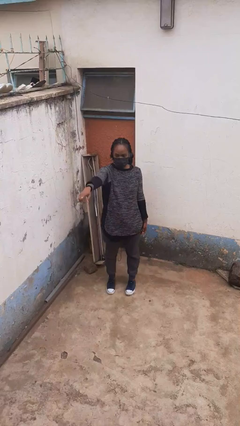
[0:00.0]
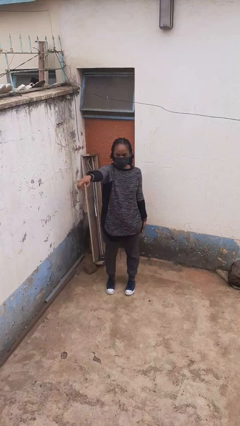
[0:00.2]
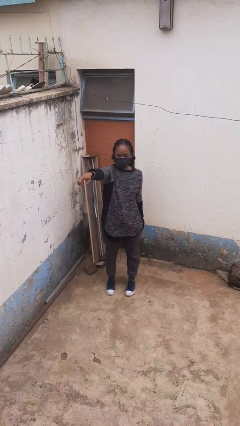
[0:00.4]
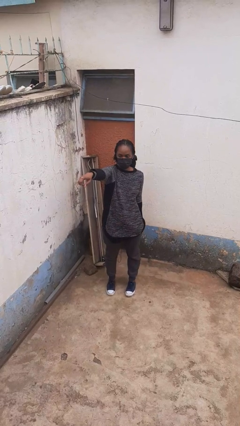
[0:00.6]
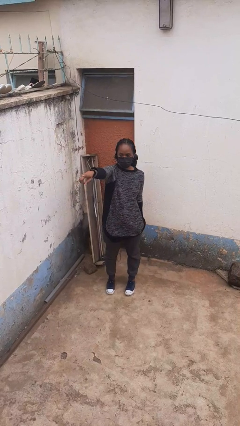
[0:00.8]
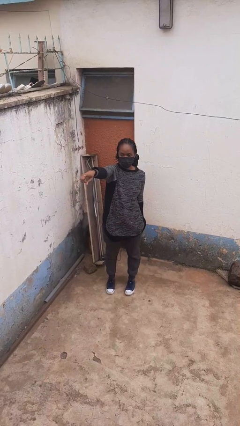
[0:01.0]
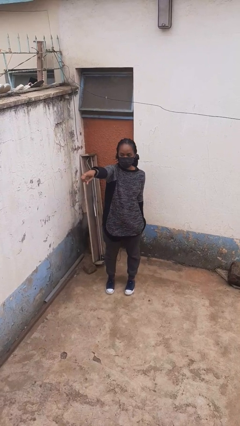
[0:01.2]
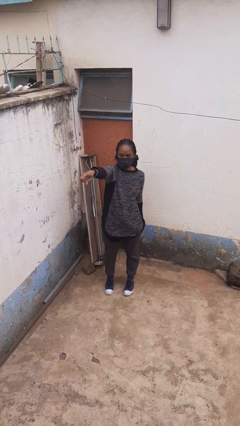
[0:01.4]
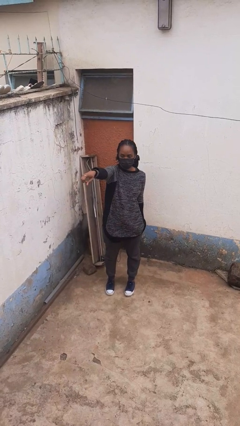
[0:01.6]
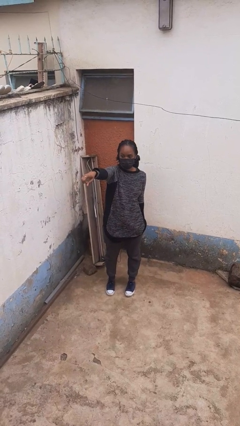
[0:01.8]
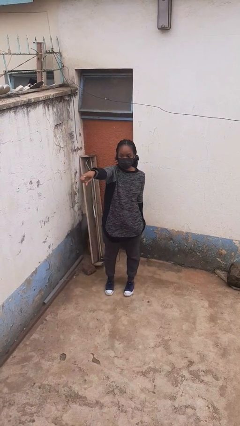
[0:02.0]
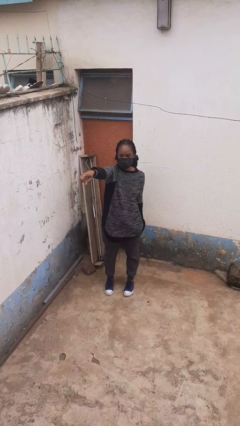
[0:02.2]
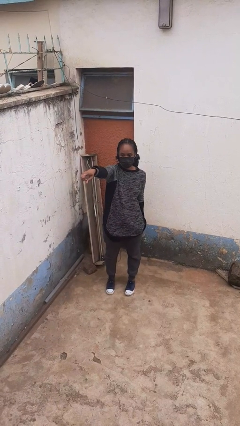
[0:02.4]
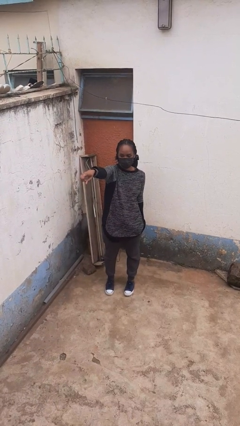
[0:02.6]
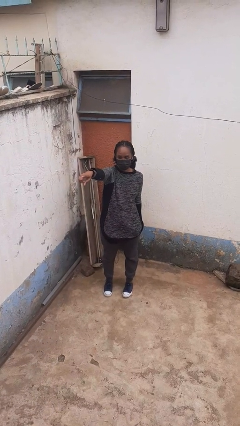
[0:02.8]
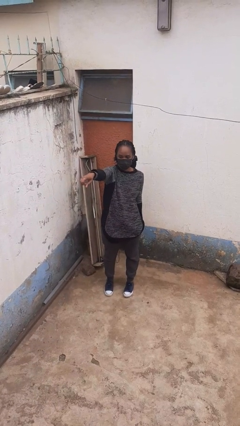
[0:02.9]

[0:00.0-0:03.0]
person points at person

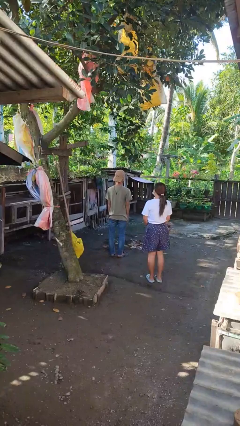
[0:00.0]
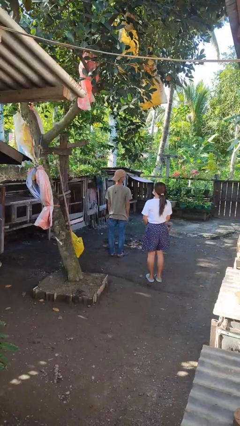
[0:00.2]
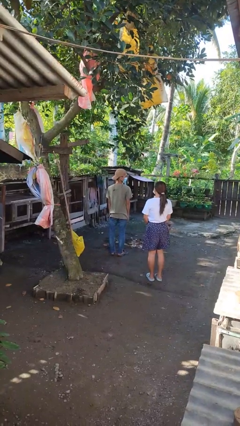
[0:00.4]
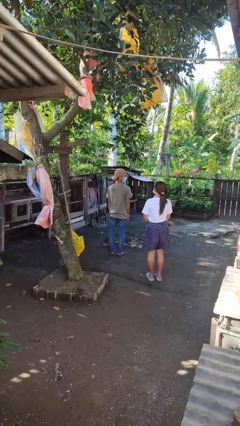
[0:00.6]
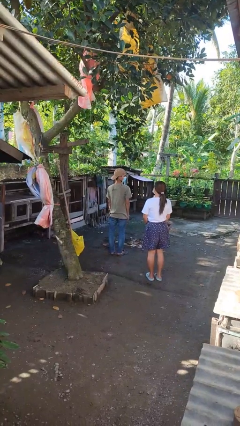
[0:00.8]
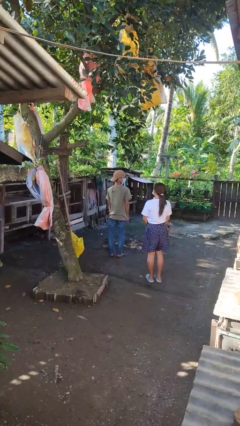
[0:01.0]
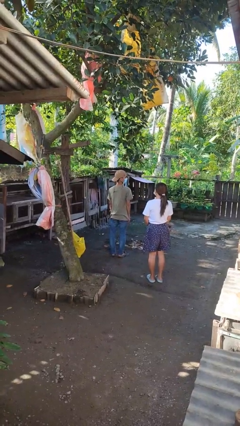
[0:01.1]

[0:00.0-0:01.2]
person looks over shoulder

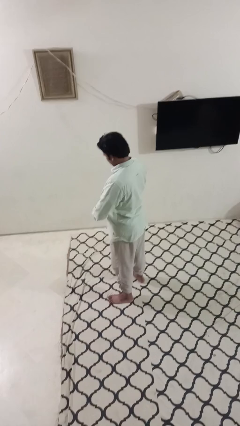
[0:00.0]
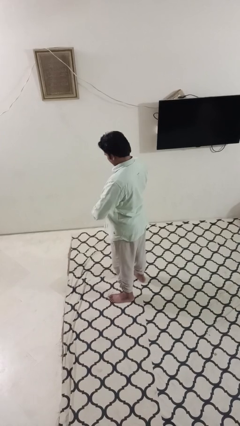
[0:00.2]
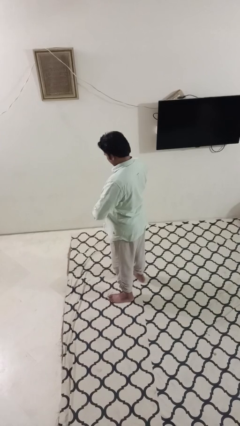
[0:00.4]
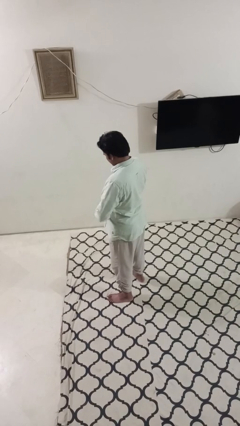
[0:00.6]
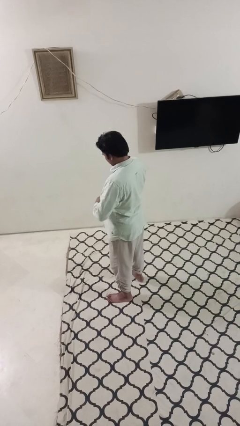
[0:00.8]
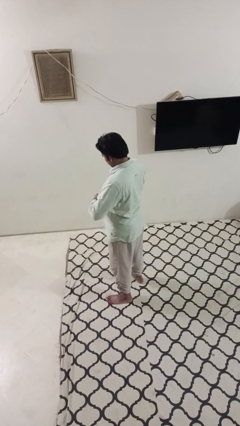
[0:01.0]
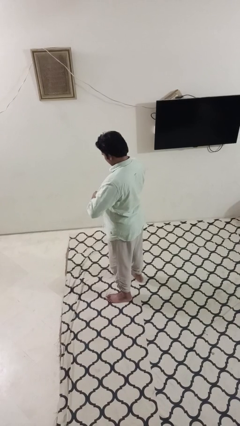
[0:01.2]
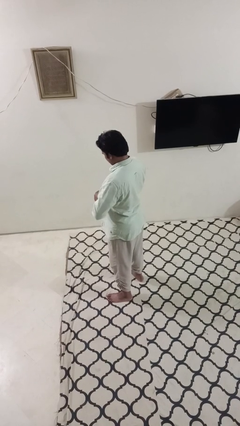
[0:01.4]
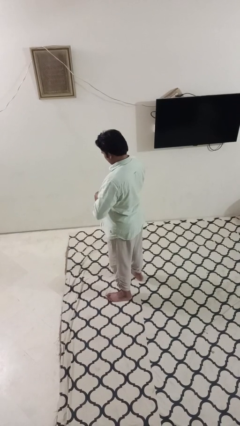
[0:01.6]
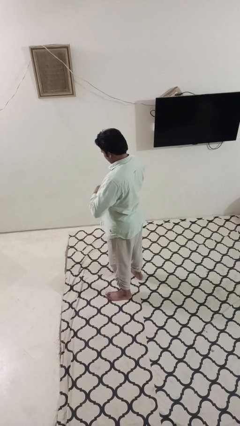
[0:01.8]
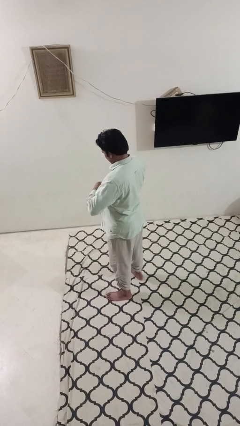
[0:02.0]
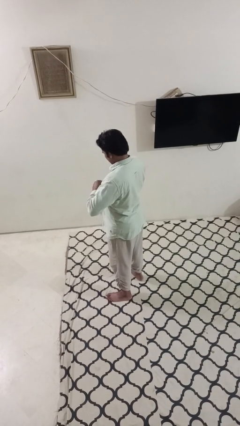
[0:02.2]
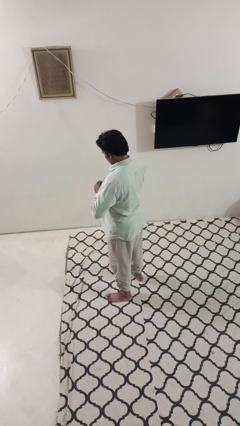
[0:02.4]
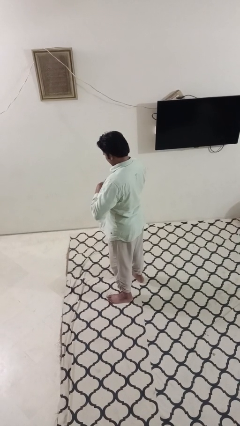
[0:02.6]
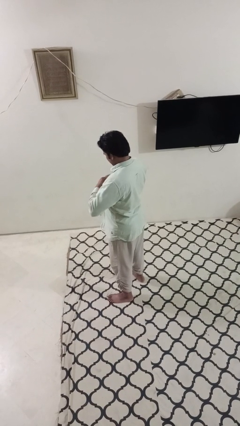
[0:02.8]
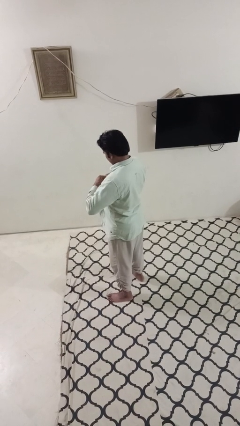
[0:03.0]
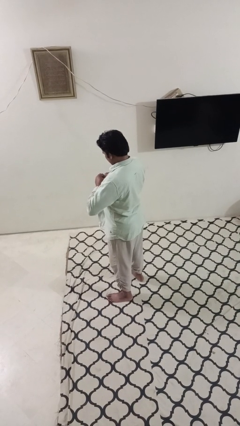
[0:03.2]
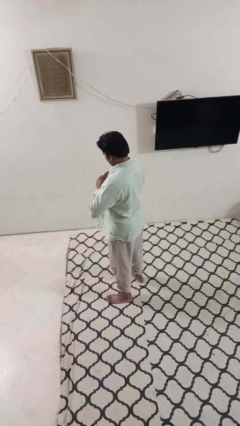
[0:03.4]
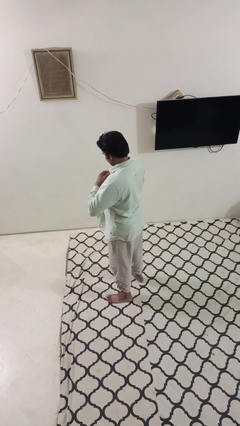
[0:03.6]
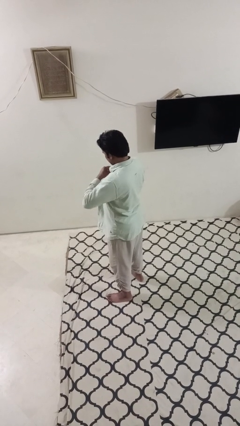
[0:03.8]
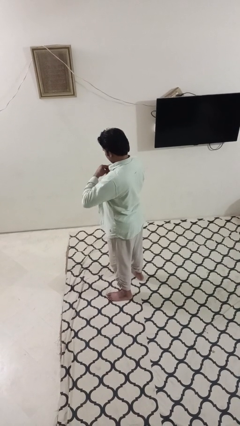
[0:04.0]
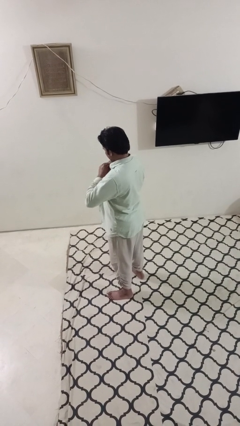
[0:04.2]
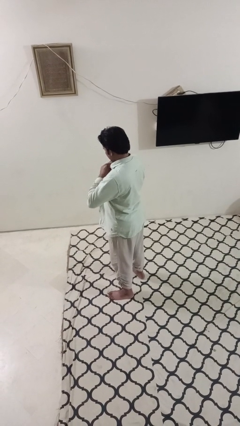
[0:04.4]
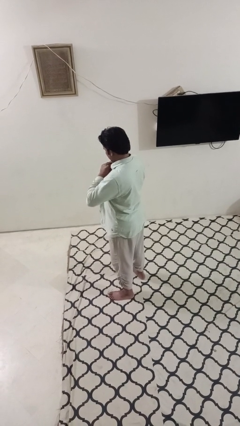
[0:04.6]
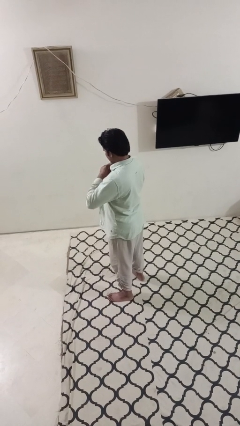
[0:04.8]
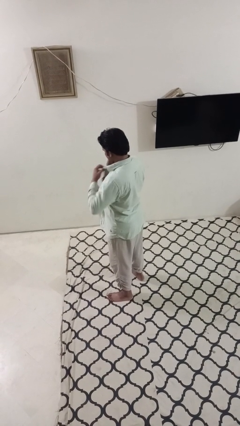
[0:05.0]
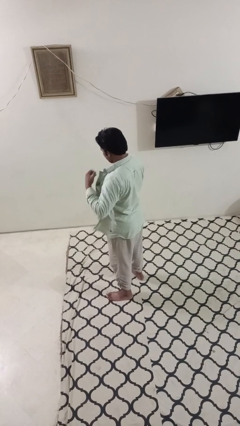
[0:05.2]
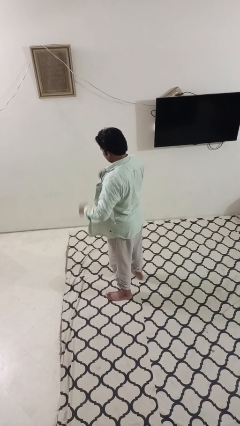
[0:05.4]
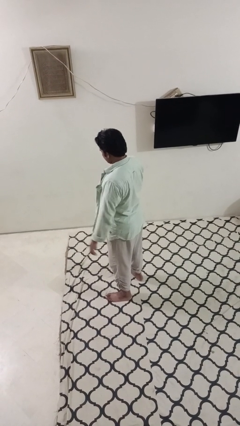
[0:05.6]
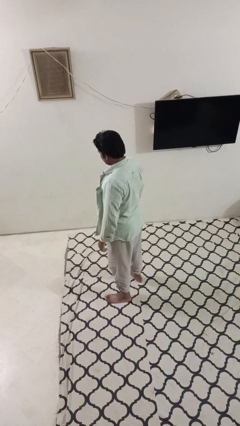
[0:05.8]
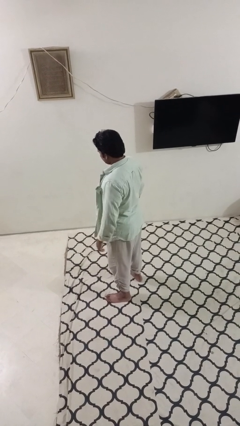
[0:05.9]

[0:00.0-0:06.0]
person unbuttons shirt

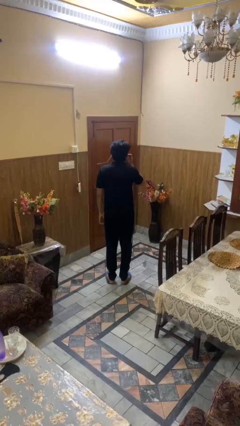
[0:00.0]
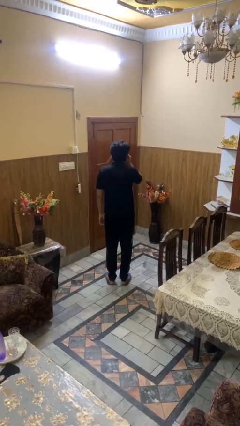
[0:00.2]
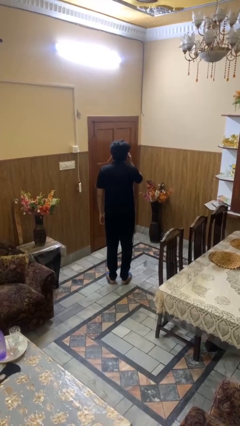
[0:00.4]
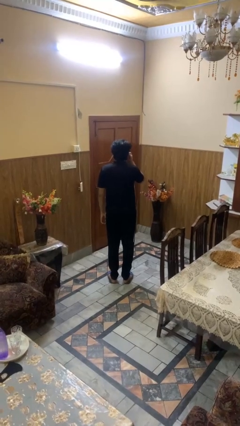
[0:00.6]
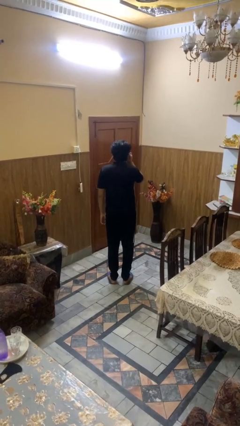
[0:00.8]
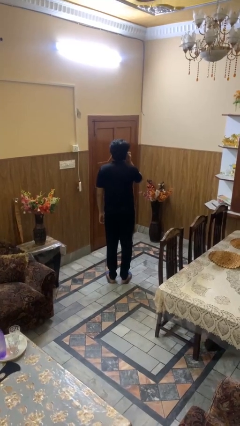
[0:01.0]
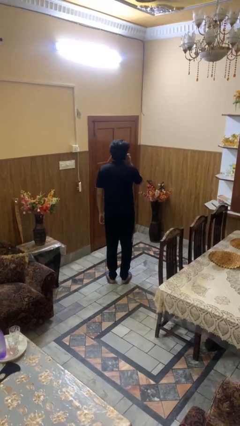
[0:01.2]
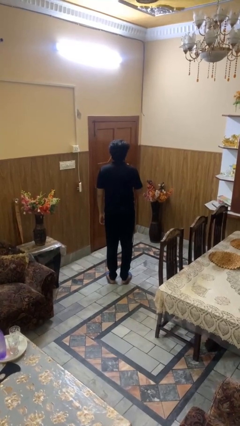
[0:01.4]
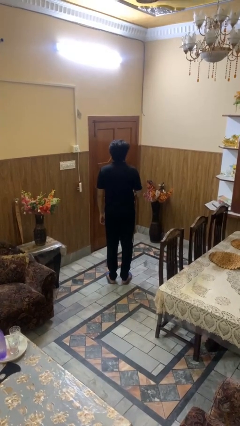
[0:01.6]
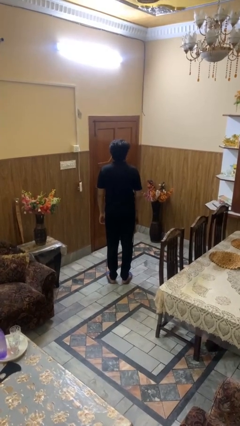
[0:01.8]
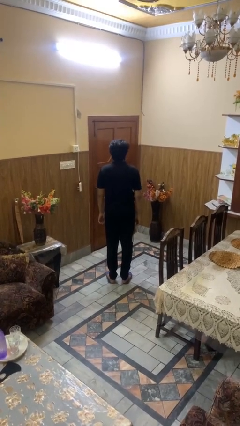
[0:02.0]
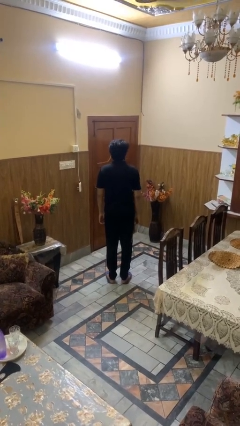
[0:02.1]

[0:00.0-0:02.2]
person touches earlobe

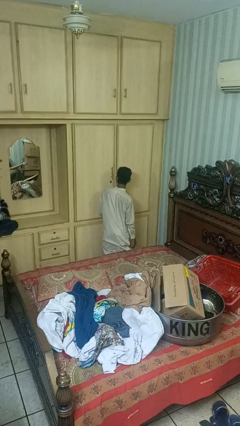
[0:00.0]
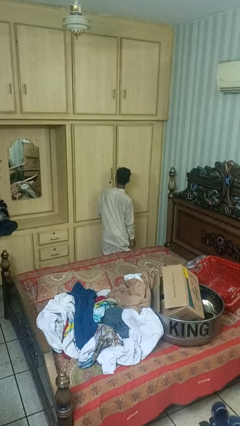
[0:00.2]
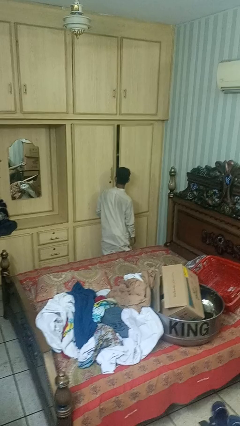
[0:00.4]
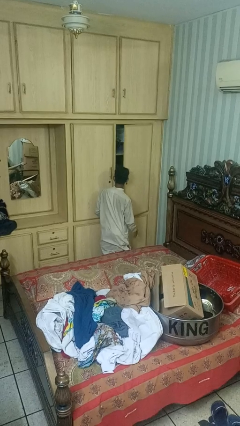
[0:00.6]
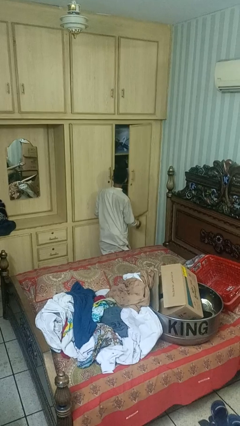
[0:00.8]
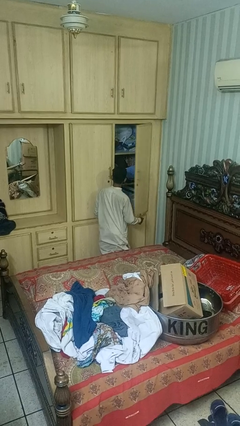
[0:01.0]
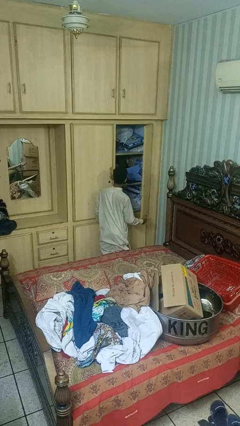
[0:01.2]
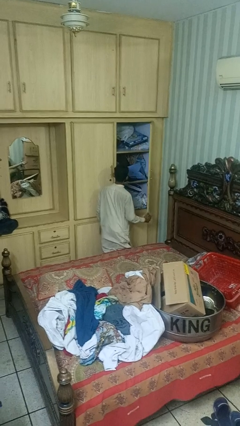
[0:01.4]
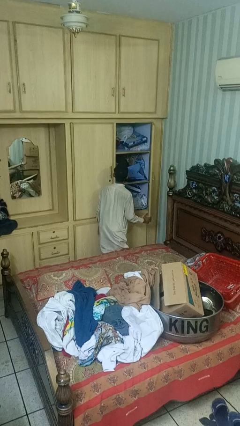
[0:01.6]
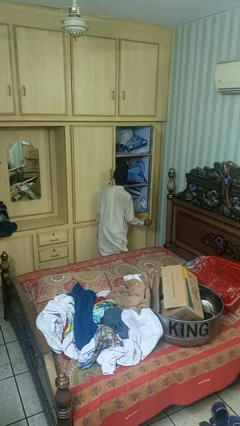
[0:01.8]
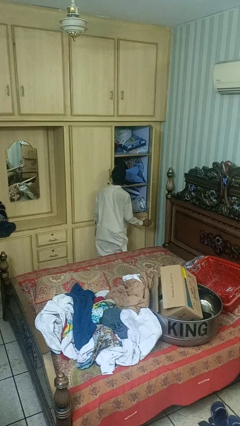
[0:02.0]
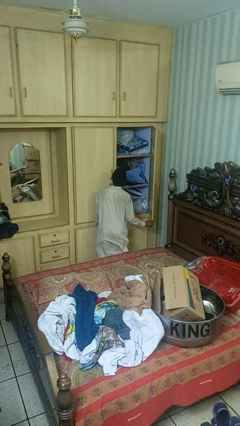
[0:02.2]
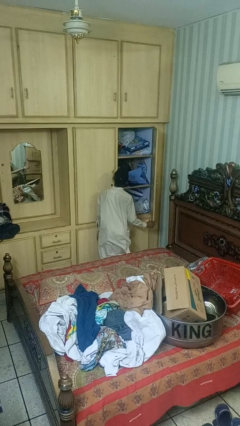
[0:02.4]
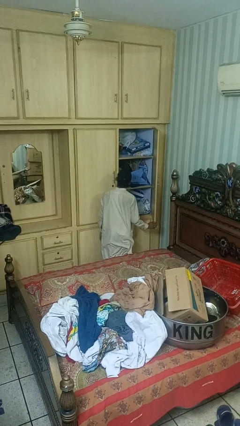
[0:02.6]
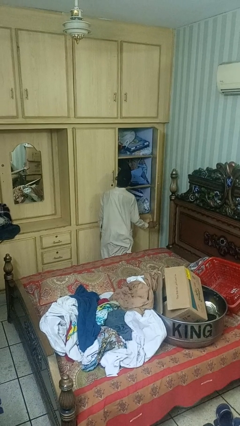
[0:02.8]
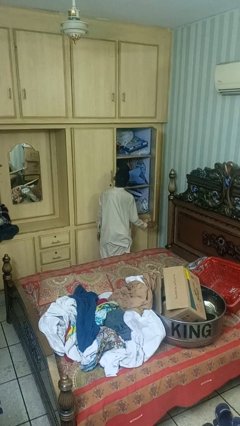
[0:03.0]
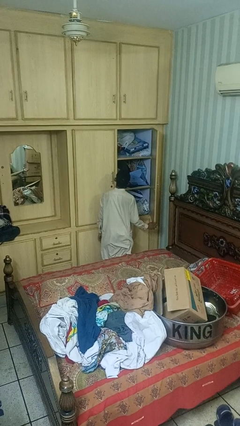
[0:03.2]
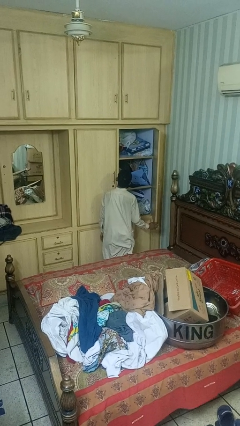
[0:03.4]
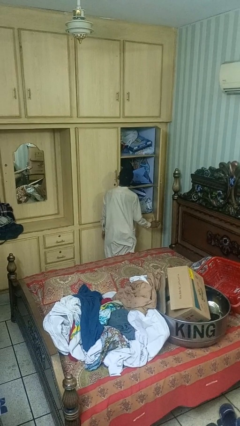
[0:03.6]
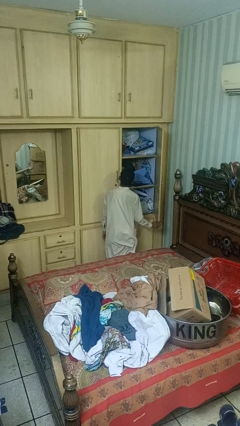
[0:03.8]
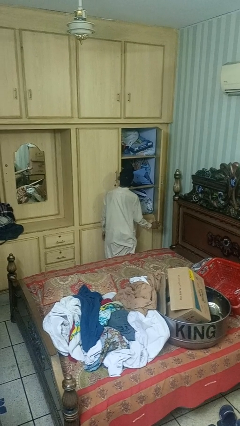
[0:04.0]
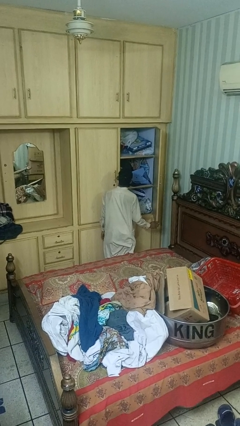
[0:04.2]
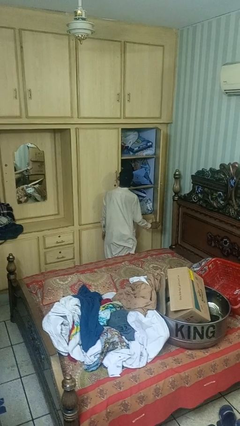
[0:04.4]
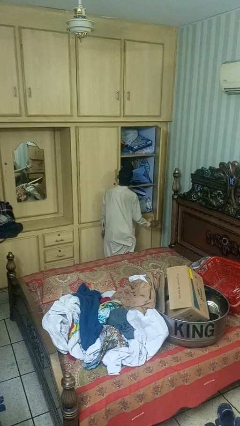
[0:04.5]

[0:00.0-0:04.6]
person opens closet door

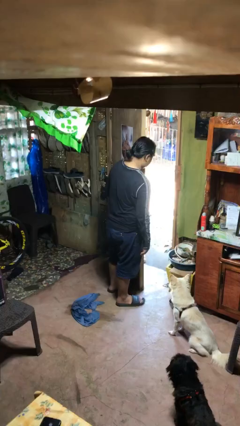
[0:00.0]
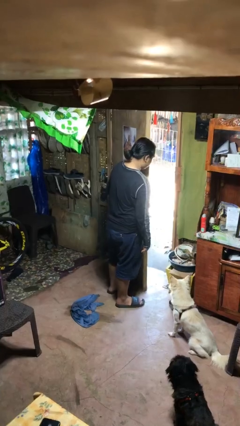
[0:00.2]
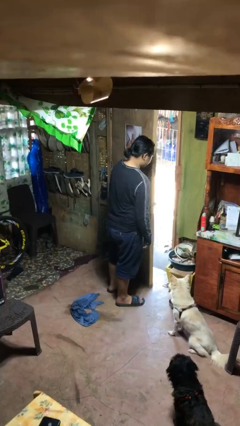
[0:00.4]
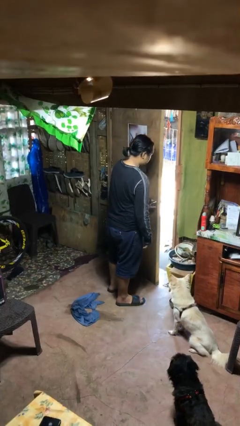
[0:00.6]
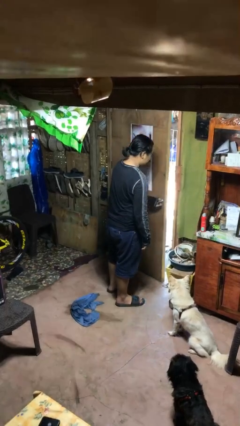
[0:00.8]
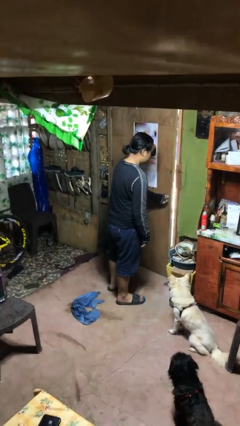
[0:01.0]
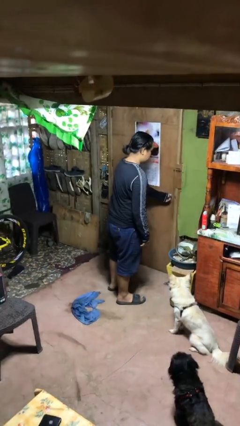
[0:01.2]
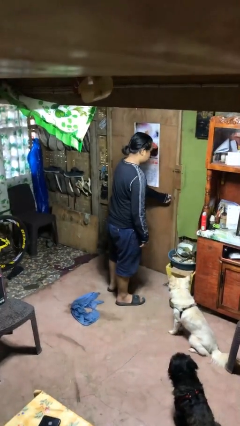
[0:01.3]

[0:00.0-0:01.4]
person closes facility door
